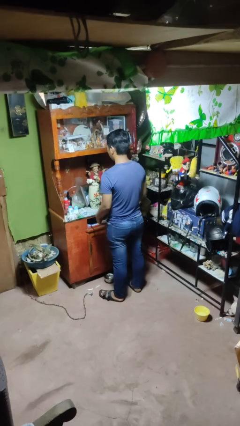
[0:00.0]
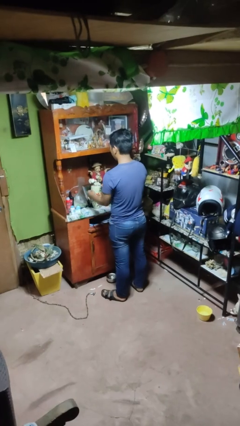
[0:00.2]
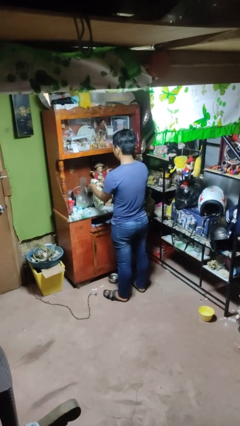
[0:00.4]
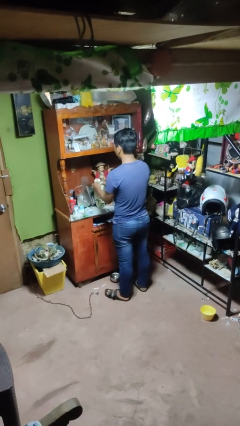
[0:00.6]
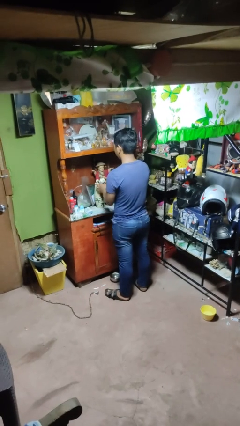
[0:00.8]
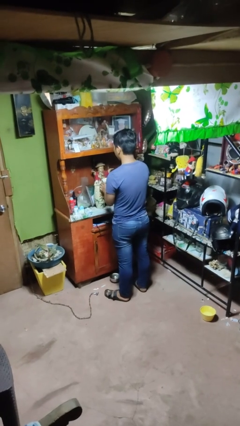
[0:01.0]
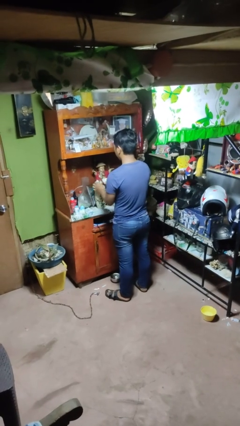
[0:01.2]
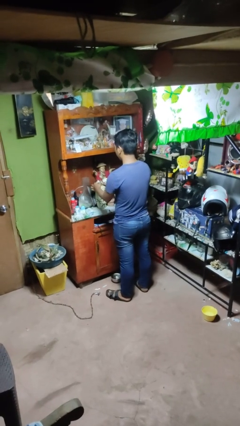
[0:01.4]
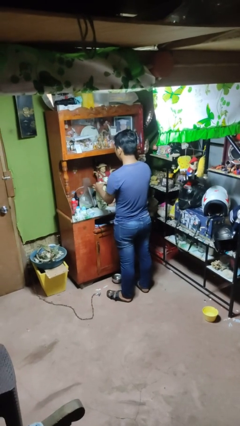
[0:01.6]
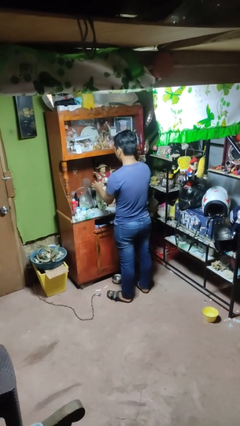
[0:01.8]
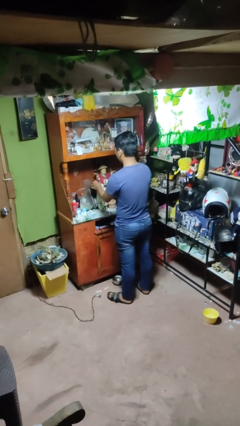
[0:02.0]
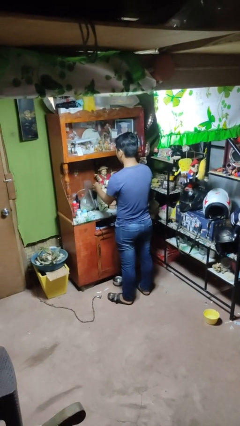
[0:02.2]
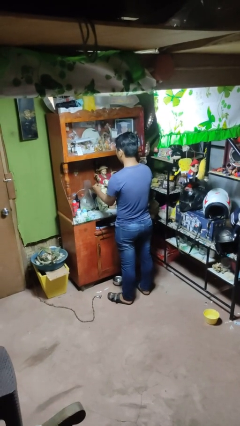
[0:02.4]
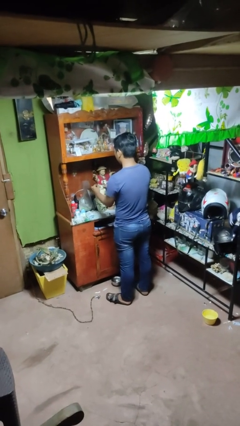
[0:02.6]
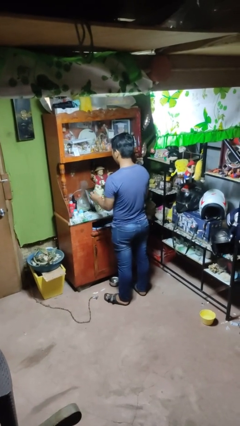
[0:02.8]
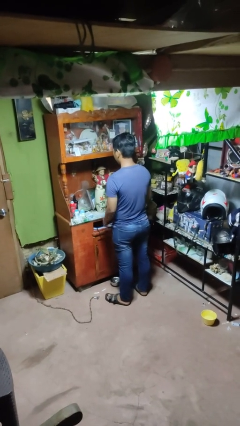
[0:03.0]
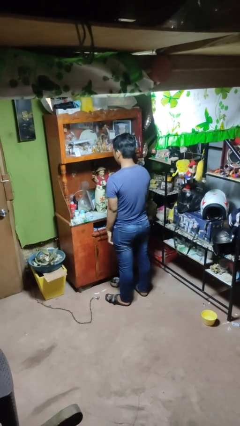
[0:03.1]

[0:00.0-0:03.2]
person arranges flowers in vase

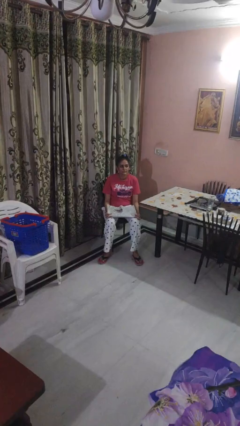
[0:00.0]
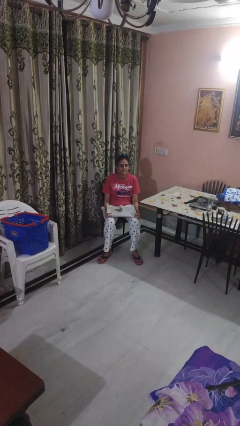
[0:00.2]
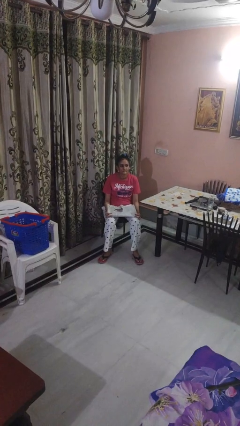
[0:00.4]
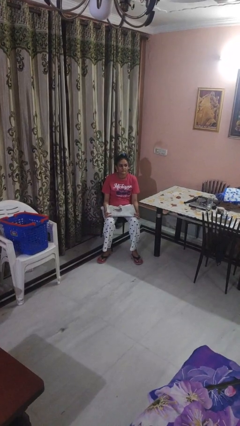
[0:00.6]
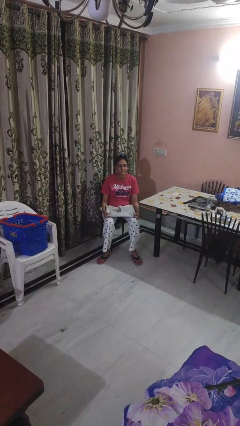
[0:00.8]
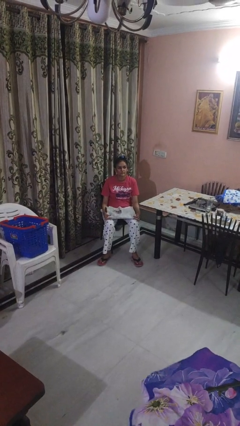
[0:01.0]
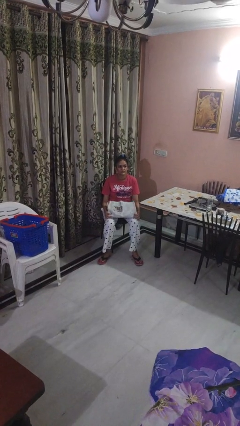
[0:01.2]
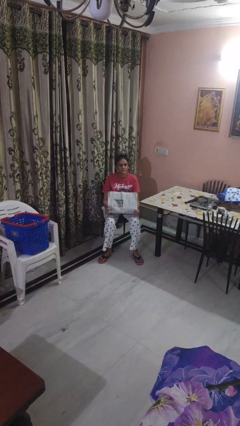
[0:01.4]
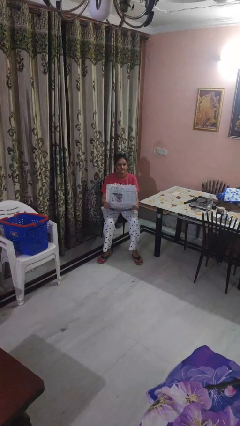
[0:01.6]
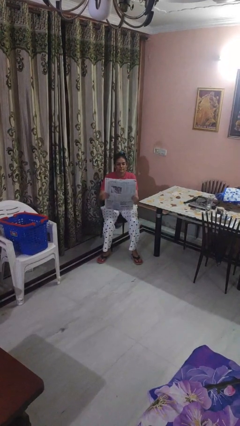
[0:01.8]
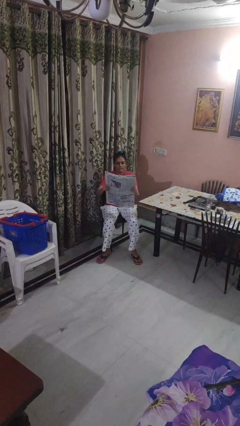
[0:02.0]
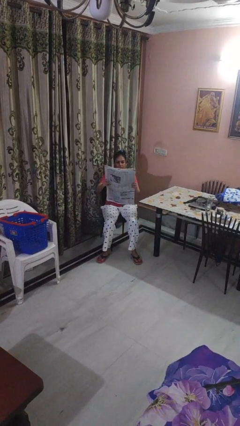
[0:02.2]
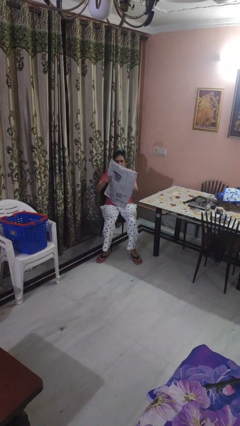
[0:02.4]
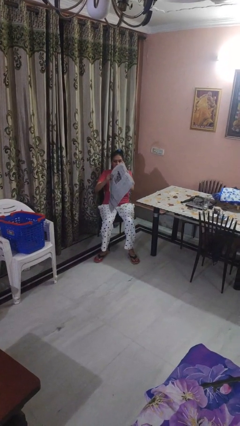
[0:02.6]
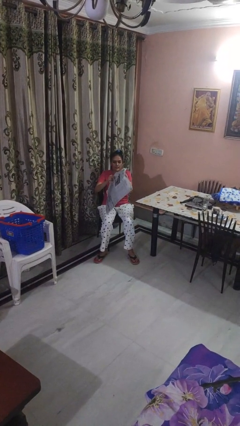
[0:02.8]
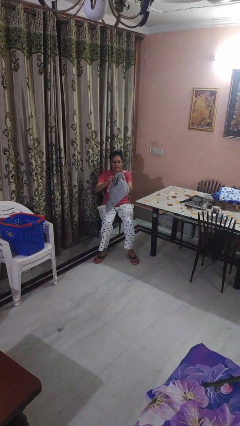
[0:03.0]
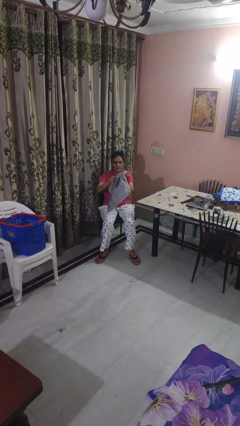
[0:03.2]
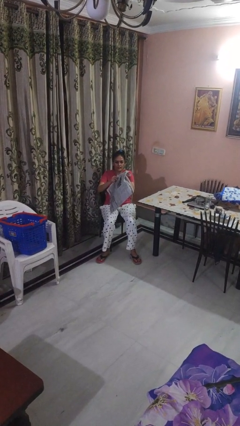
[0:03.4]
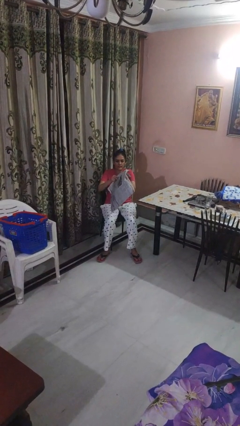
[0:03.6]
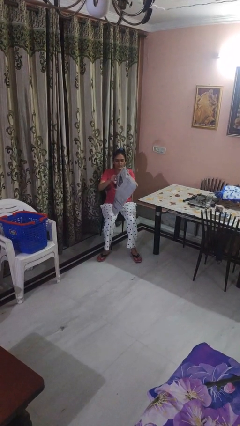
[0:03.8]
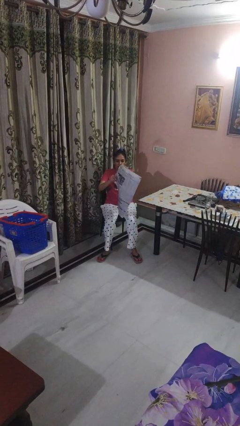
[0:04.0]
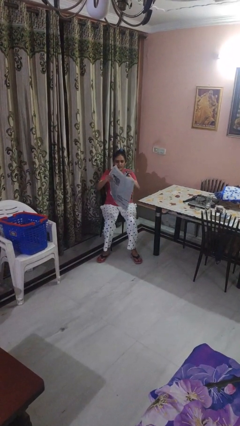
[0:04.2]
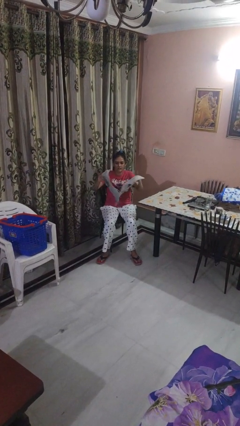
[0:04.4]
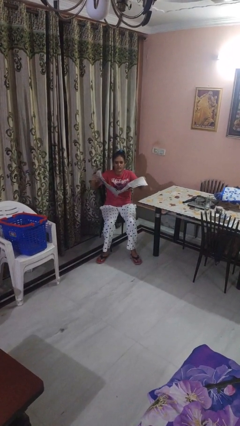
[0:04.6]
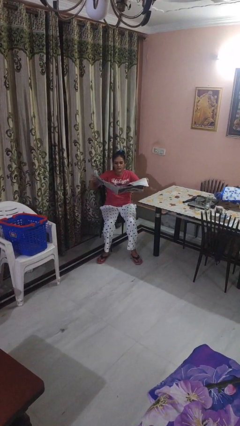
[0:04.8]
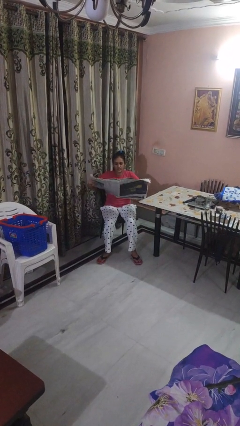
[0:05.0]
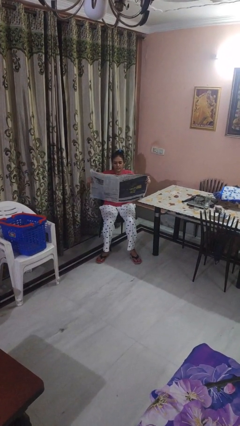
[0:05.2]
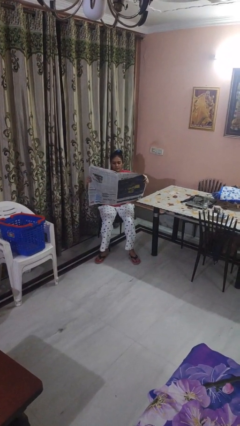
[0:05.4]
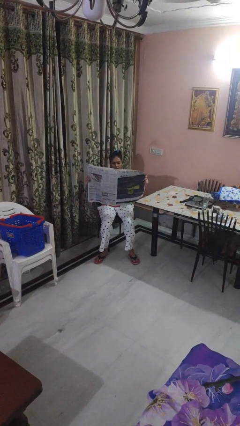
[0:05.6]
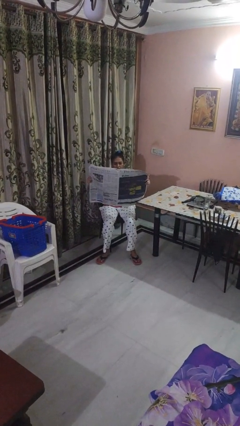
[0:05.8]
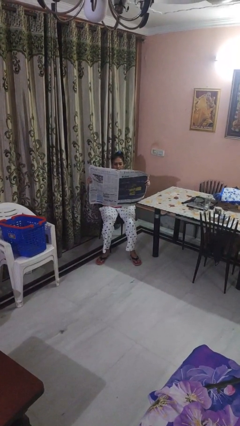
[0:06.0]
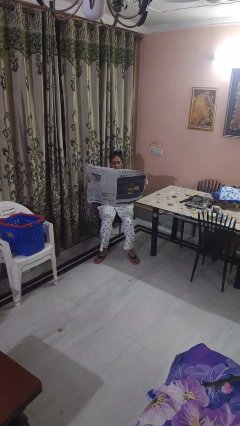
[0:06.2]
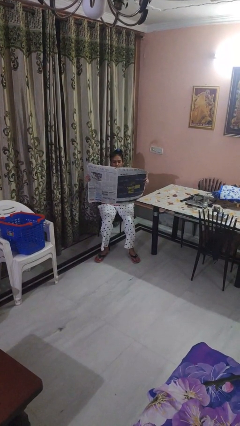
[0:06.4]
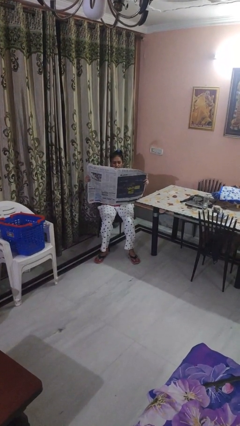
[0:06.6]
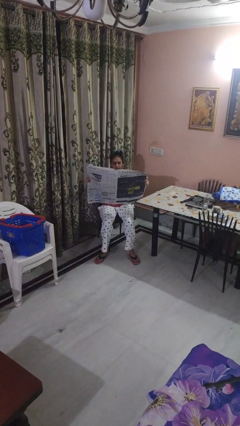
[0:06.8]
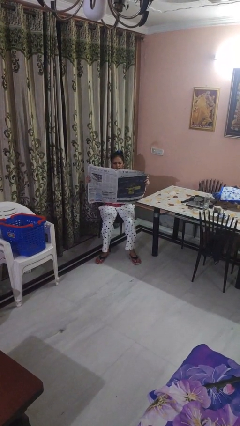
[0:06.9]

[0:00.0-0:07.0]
person reads newspaper

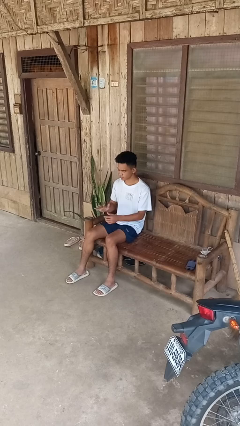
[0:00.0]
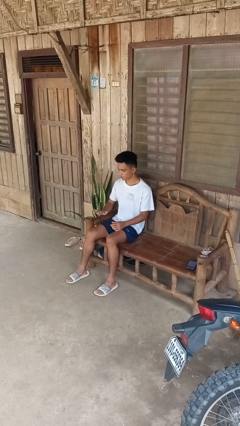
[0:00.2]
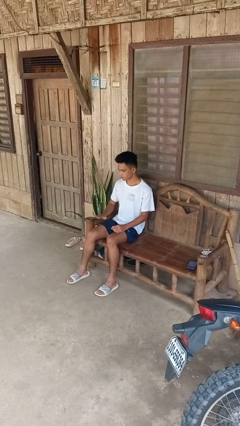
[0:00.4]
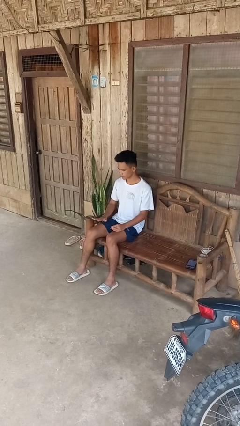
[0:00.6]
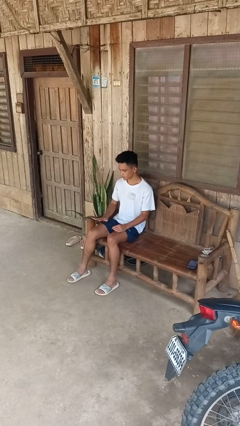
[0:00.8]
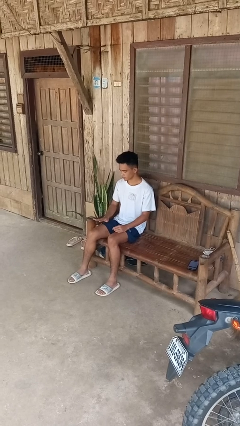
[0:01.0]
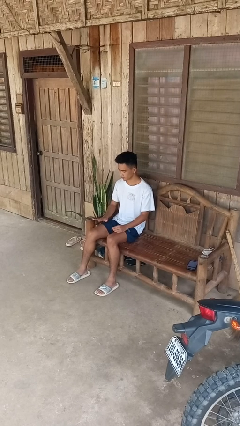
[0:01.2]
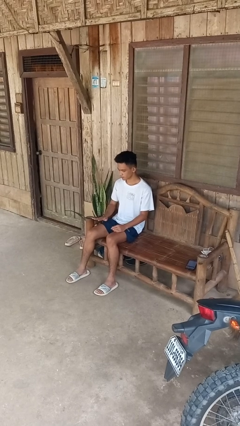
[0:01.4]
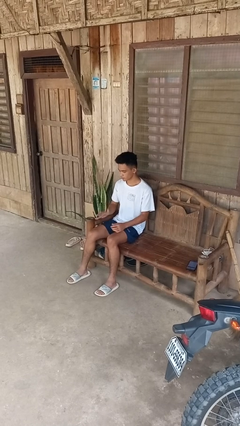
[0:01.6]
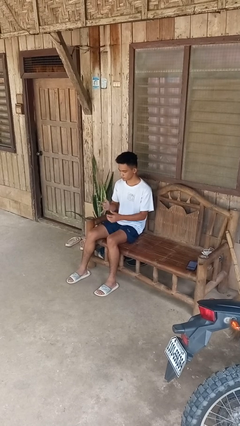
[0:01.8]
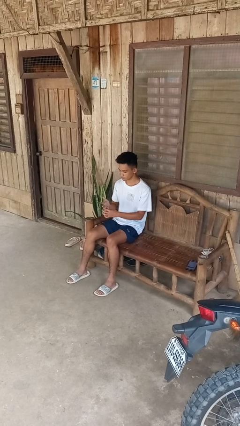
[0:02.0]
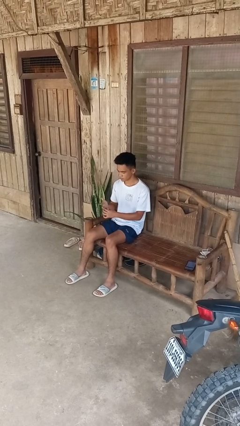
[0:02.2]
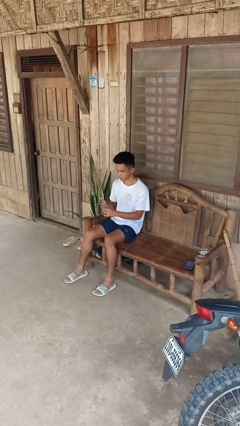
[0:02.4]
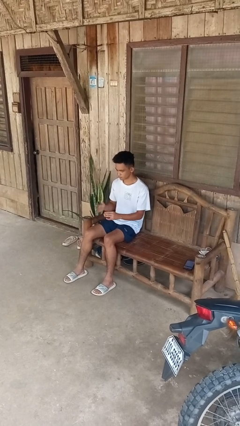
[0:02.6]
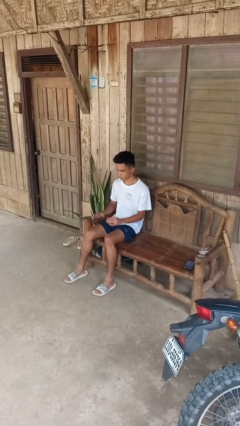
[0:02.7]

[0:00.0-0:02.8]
person puts on ring

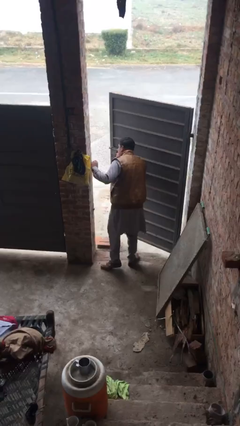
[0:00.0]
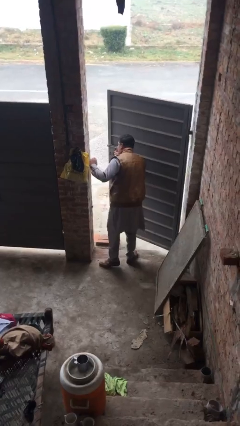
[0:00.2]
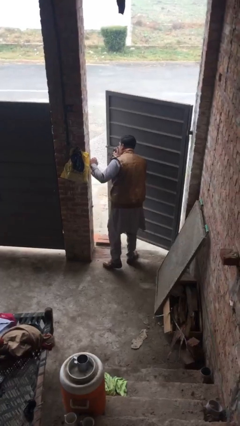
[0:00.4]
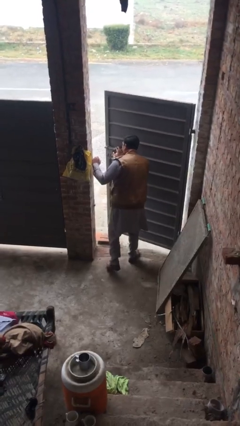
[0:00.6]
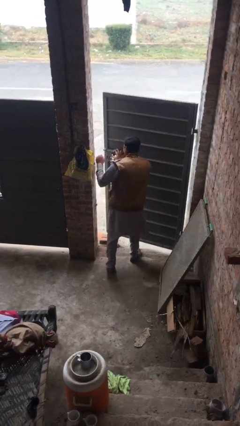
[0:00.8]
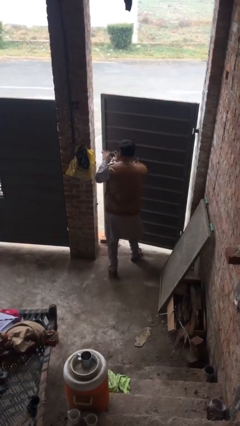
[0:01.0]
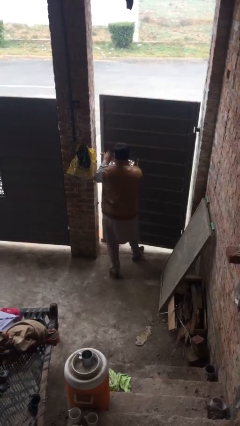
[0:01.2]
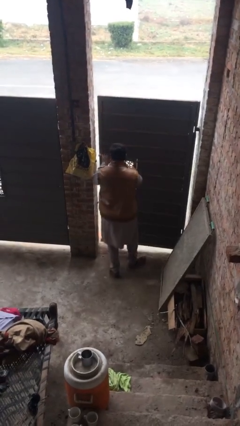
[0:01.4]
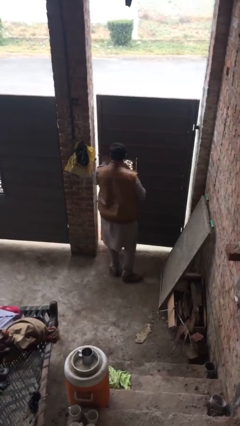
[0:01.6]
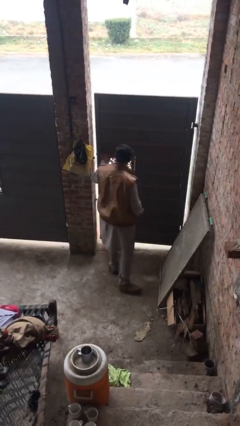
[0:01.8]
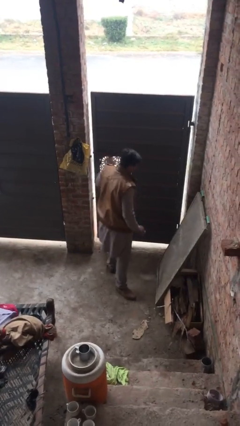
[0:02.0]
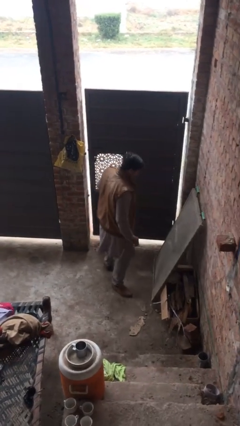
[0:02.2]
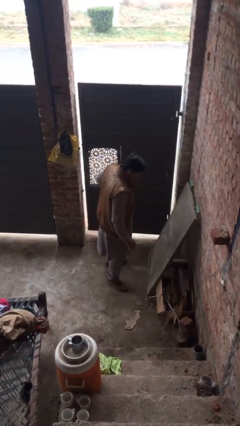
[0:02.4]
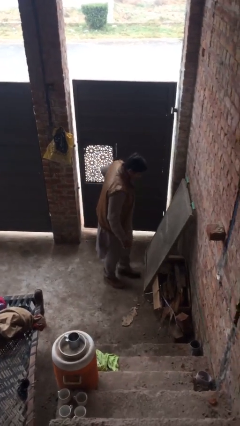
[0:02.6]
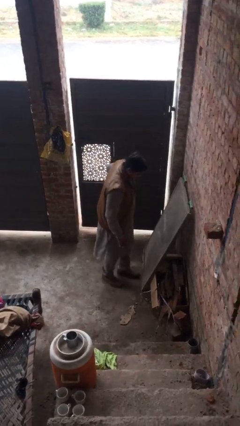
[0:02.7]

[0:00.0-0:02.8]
person closes facility door

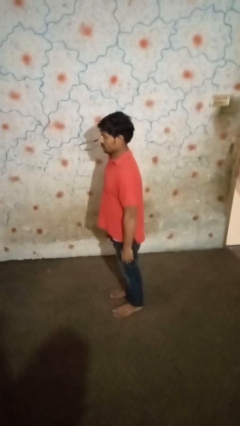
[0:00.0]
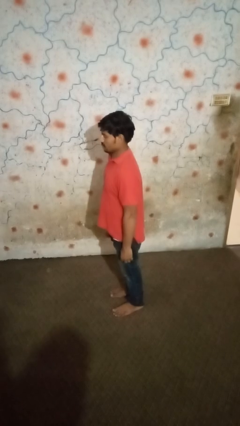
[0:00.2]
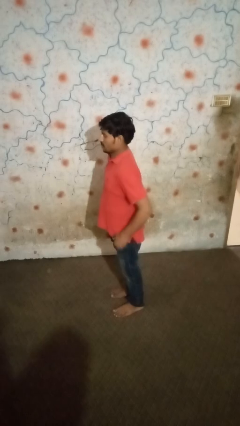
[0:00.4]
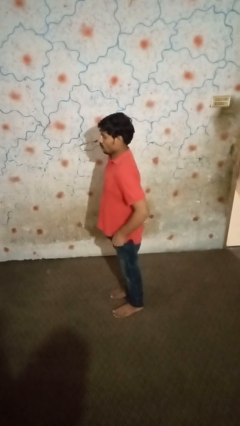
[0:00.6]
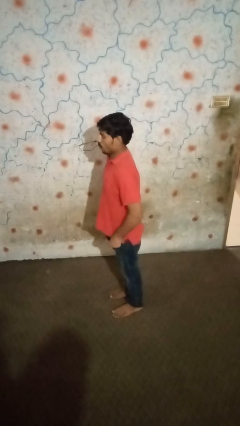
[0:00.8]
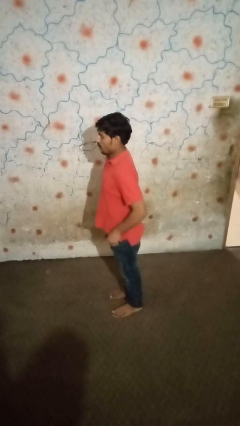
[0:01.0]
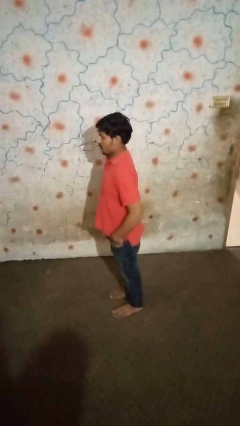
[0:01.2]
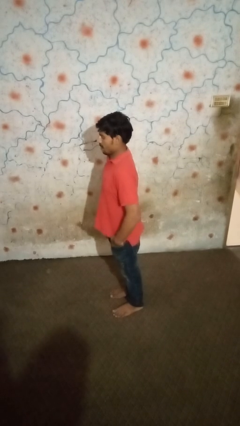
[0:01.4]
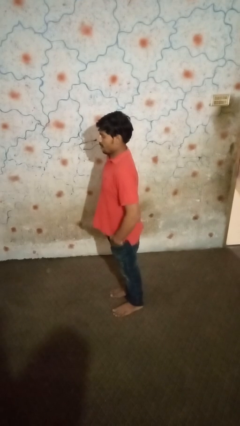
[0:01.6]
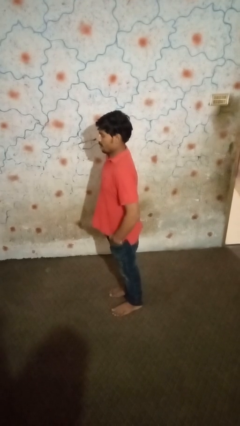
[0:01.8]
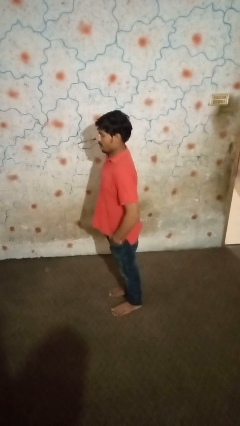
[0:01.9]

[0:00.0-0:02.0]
person puts hands in back pockets
